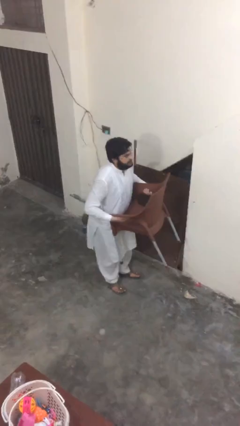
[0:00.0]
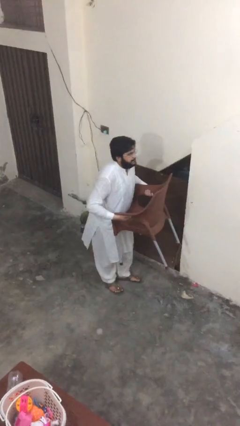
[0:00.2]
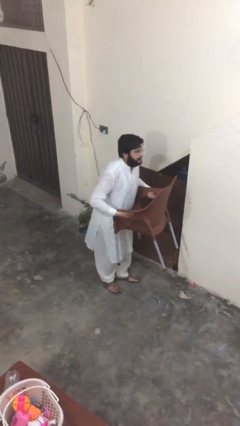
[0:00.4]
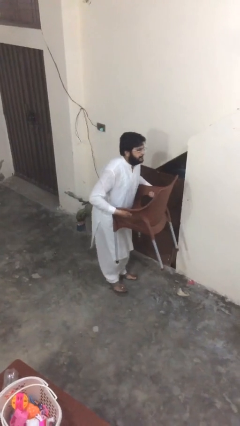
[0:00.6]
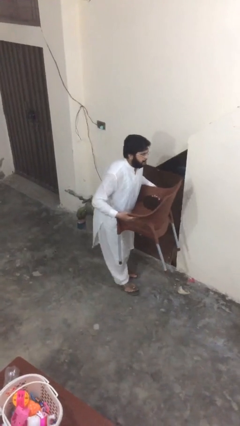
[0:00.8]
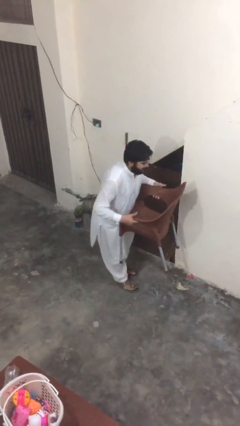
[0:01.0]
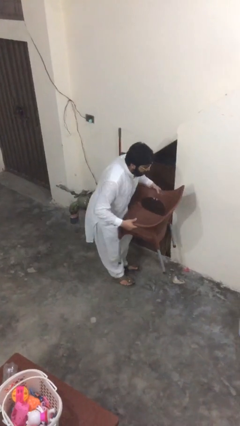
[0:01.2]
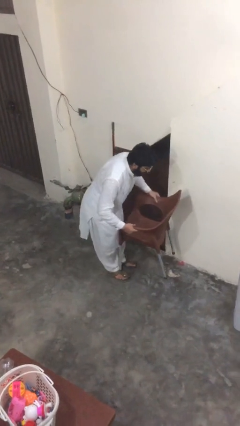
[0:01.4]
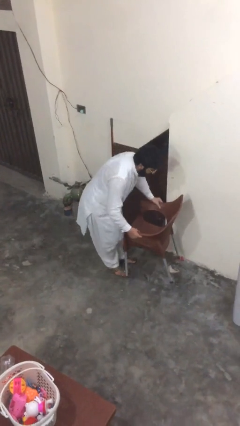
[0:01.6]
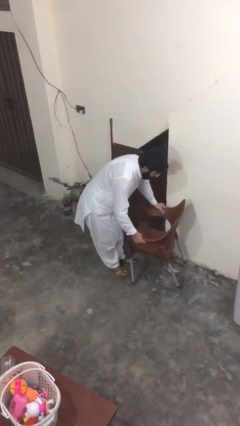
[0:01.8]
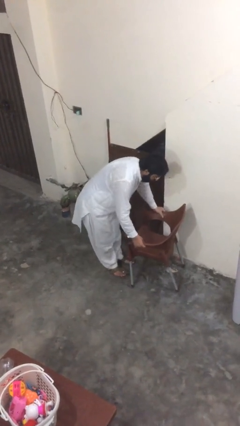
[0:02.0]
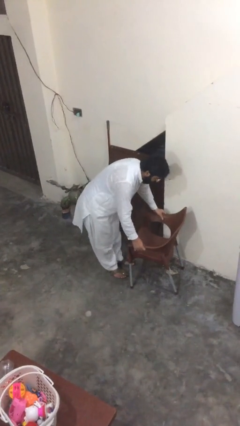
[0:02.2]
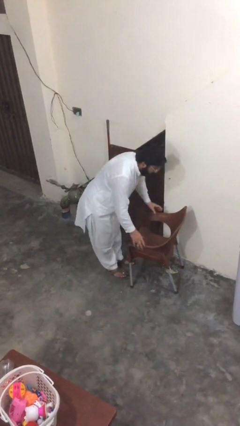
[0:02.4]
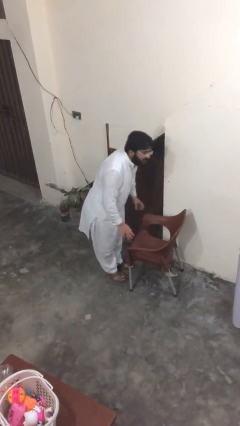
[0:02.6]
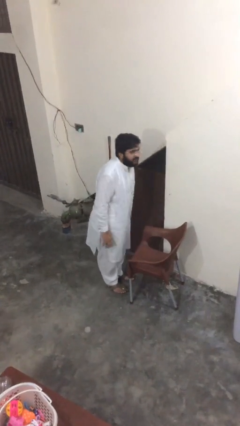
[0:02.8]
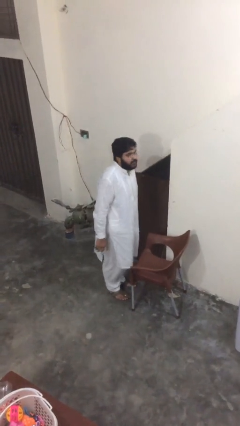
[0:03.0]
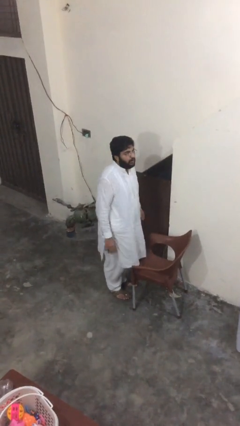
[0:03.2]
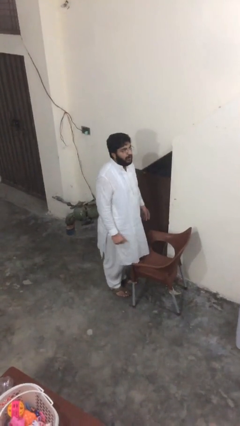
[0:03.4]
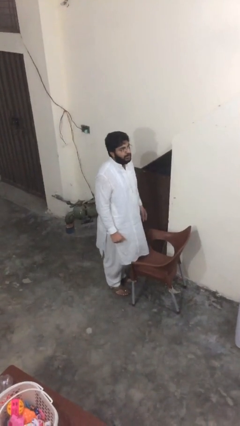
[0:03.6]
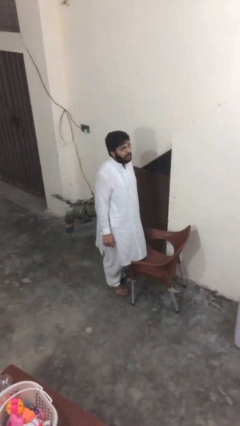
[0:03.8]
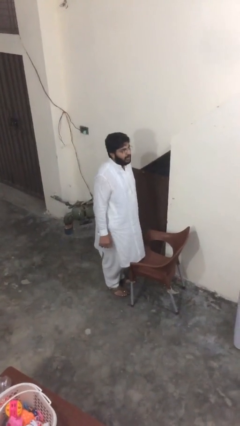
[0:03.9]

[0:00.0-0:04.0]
person puts down object on floor

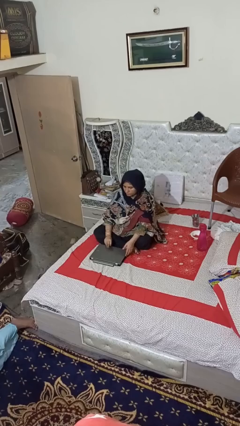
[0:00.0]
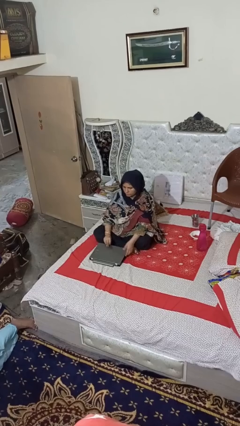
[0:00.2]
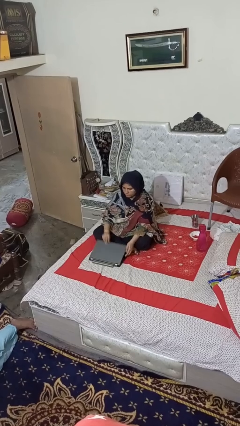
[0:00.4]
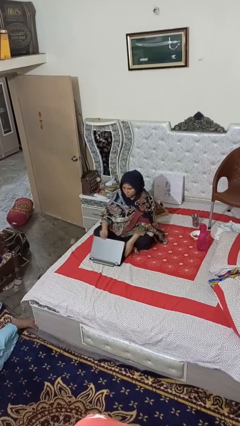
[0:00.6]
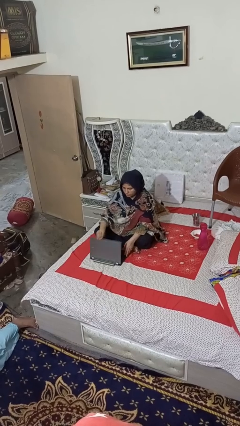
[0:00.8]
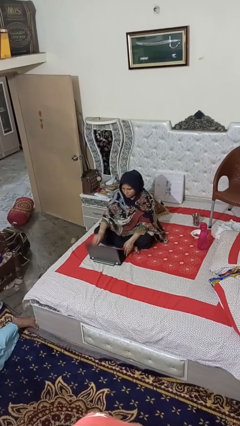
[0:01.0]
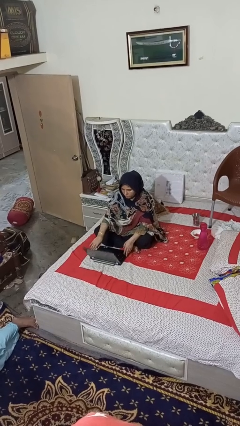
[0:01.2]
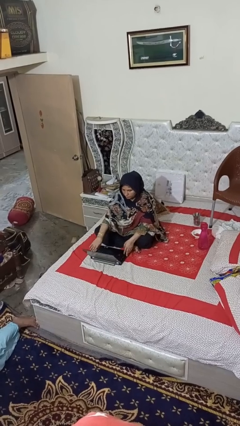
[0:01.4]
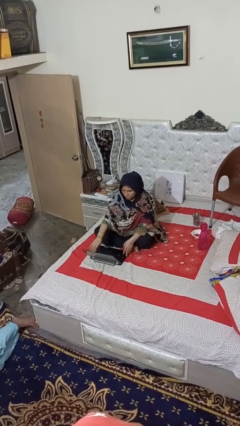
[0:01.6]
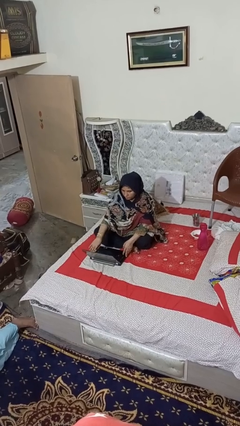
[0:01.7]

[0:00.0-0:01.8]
person opens laptop

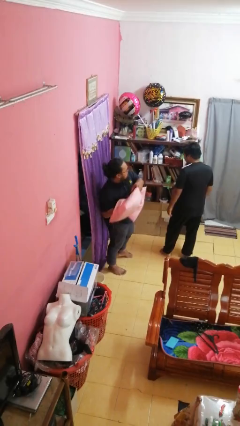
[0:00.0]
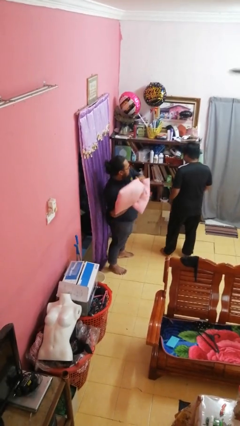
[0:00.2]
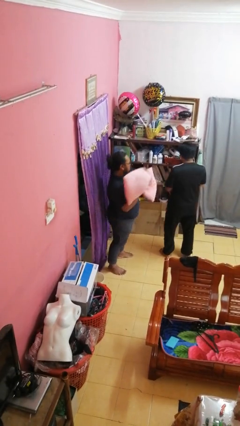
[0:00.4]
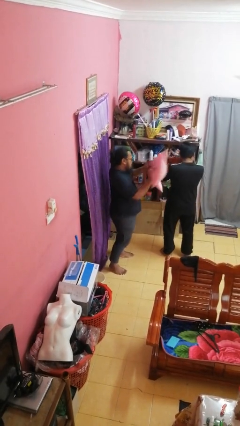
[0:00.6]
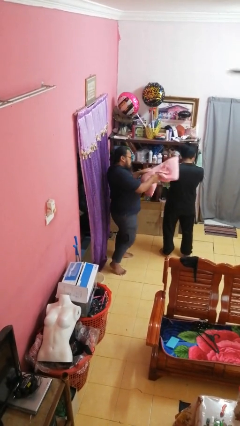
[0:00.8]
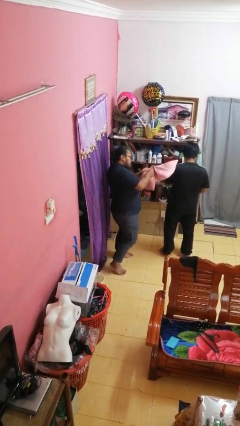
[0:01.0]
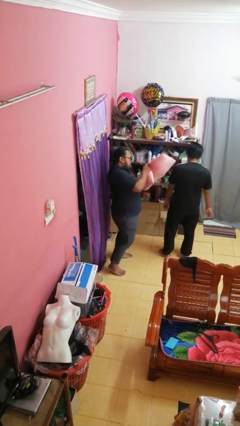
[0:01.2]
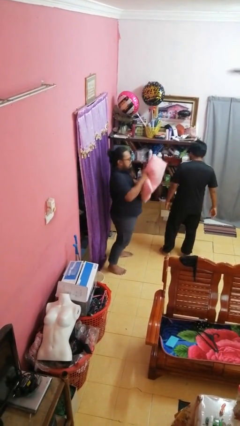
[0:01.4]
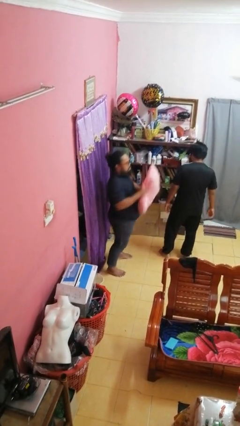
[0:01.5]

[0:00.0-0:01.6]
person hits person with pillow

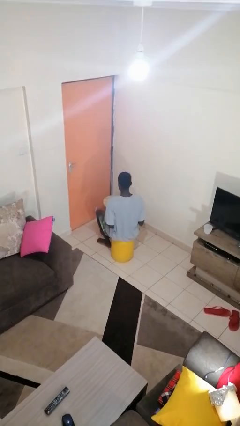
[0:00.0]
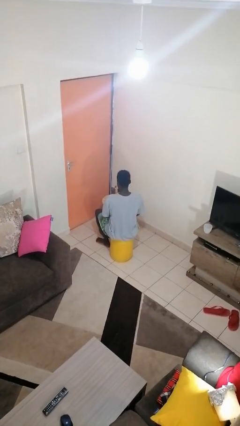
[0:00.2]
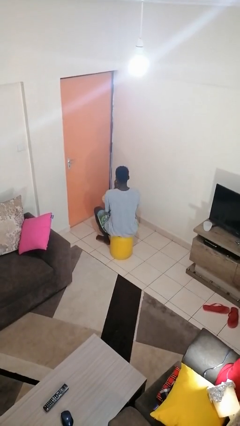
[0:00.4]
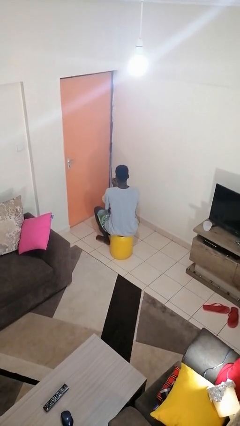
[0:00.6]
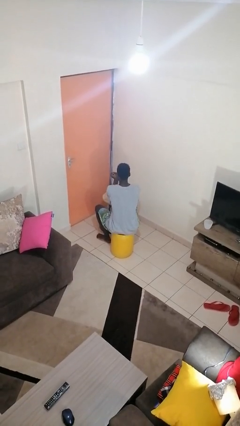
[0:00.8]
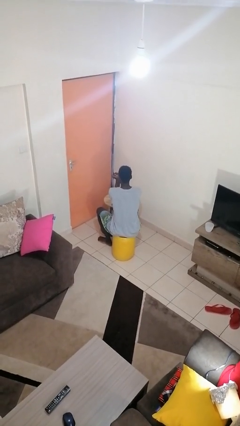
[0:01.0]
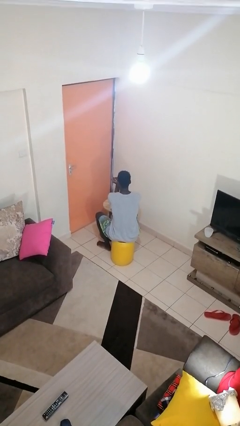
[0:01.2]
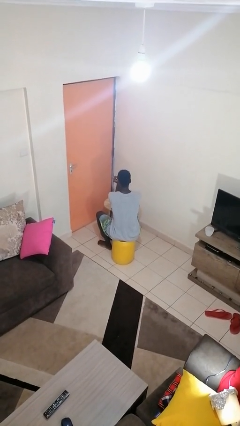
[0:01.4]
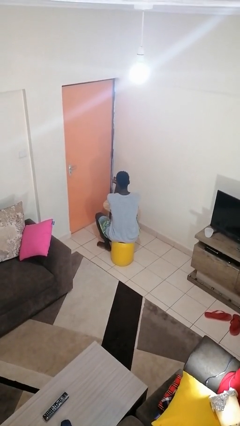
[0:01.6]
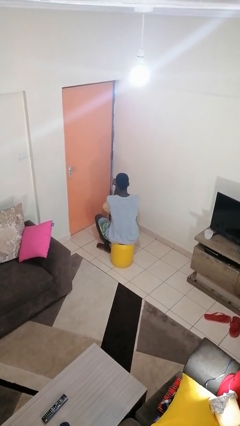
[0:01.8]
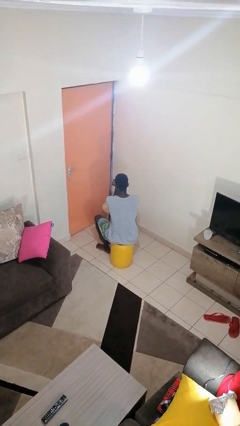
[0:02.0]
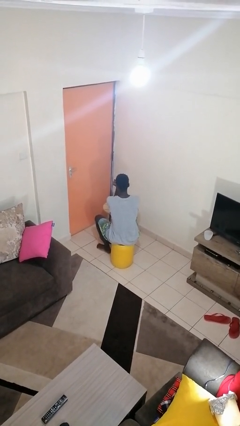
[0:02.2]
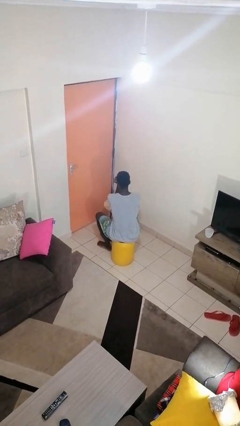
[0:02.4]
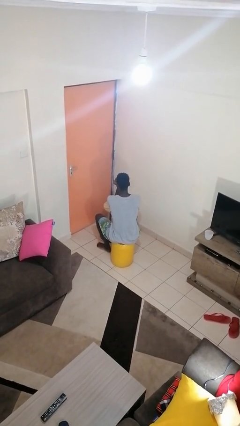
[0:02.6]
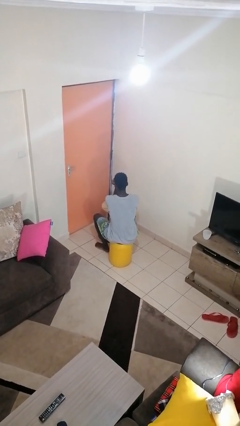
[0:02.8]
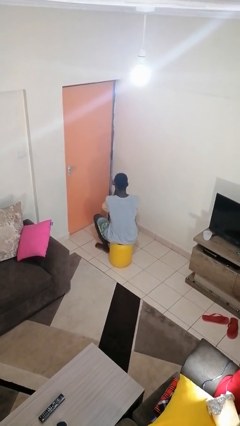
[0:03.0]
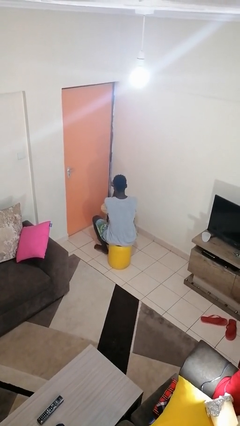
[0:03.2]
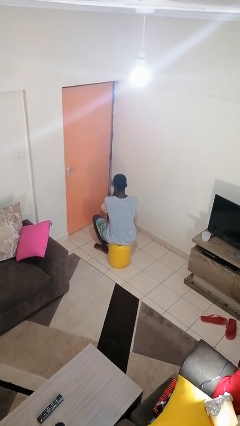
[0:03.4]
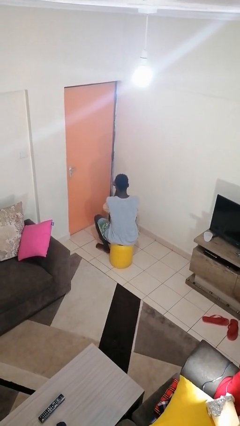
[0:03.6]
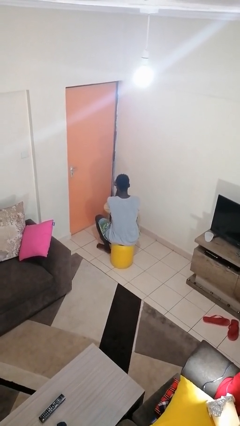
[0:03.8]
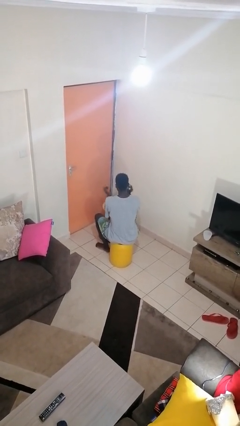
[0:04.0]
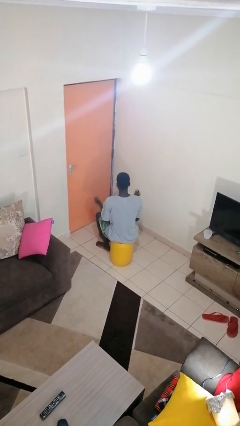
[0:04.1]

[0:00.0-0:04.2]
person paints fingernails

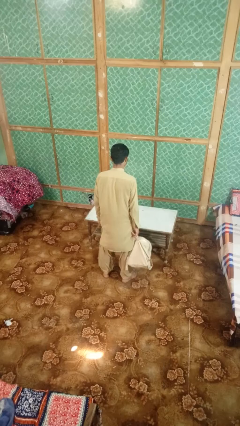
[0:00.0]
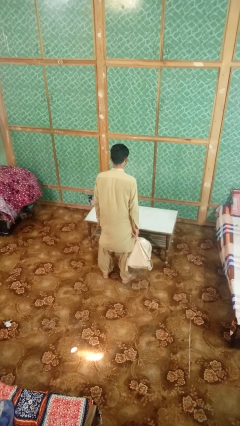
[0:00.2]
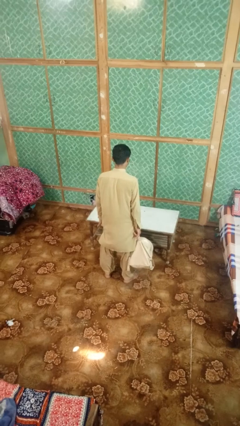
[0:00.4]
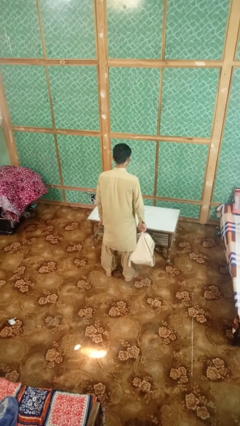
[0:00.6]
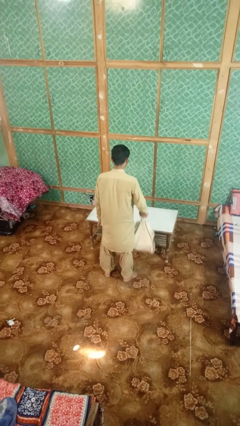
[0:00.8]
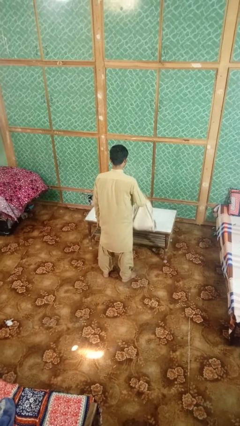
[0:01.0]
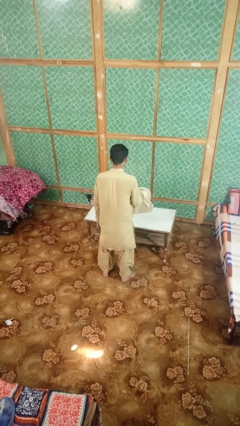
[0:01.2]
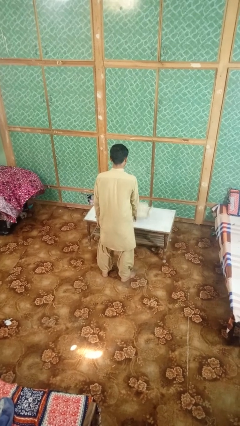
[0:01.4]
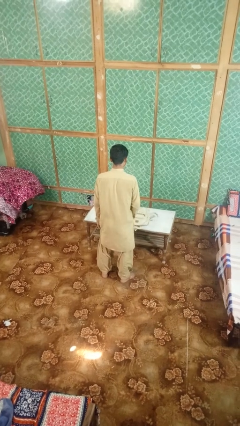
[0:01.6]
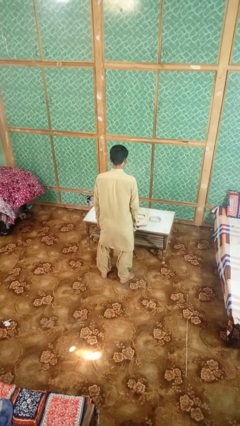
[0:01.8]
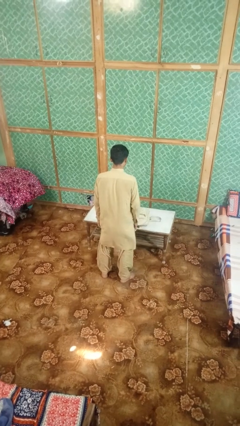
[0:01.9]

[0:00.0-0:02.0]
person throws object on table

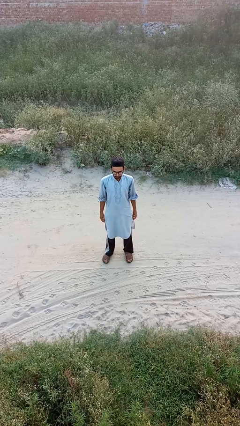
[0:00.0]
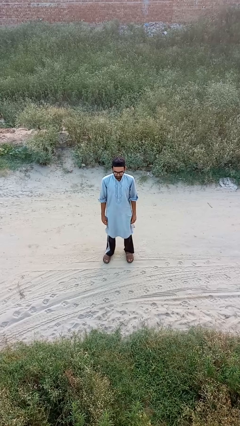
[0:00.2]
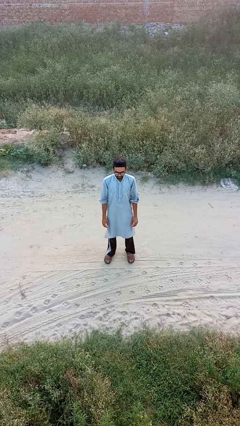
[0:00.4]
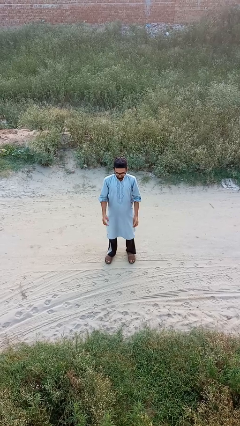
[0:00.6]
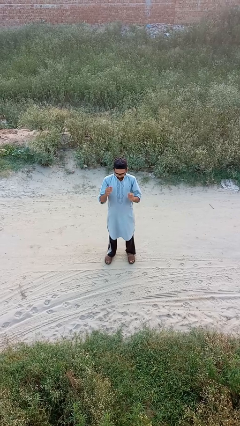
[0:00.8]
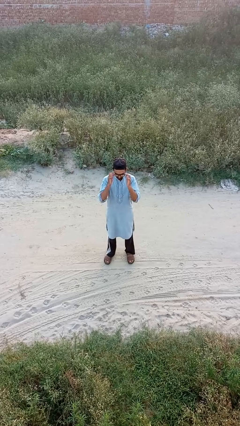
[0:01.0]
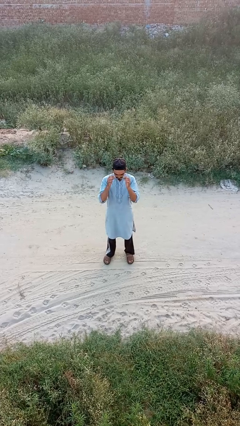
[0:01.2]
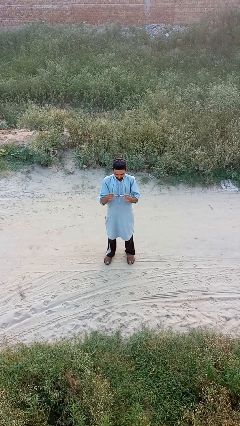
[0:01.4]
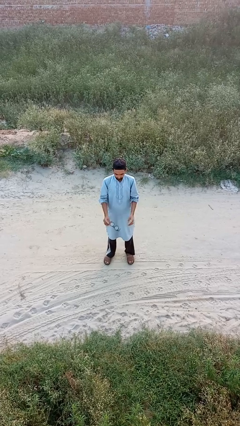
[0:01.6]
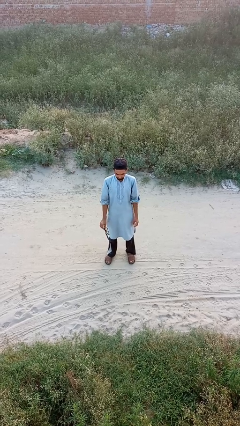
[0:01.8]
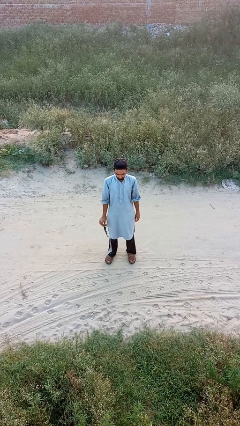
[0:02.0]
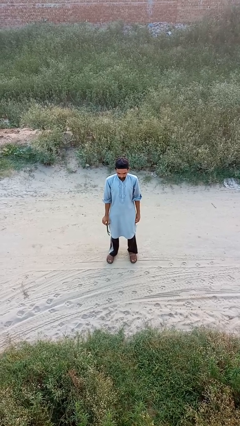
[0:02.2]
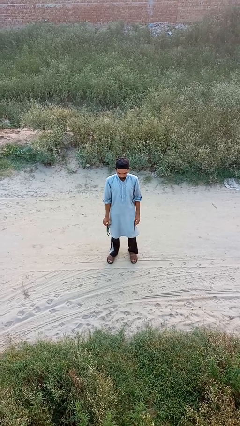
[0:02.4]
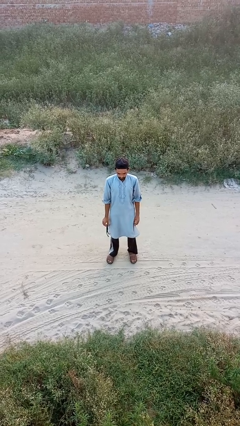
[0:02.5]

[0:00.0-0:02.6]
person takes off glasses

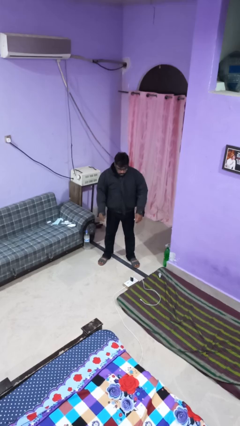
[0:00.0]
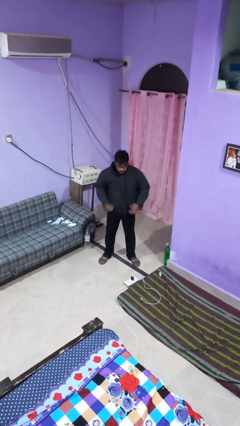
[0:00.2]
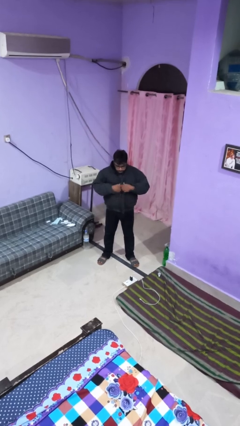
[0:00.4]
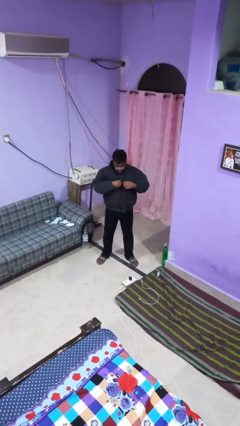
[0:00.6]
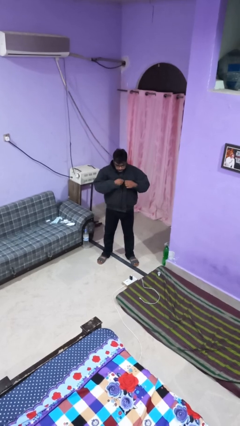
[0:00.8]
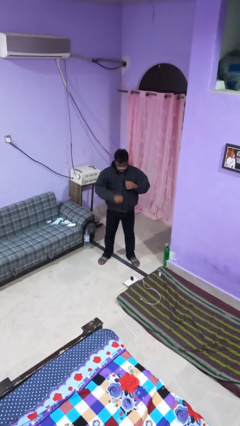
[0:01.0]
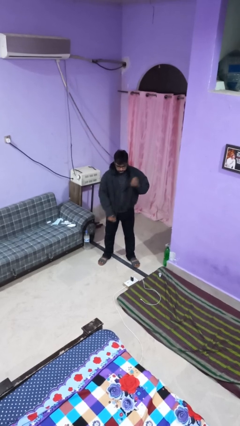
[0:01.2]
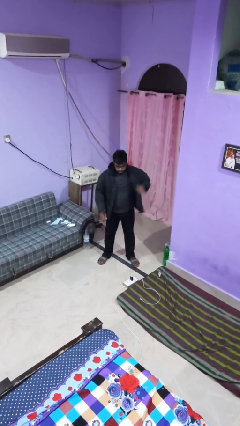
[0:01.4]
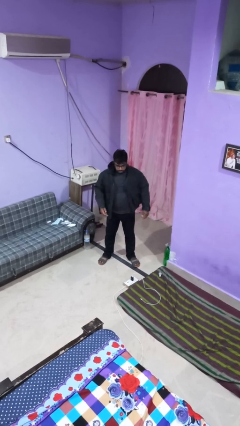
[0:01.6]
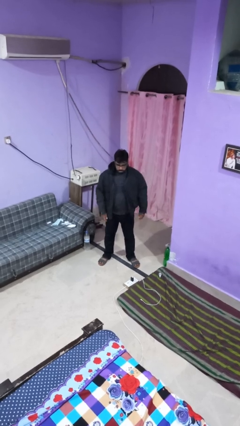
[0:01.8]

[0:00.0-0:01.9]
person unzips jacket
